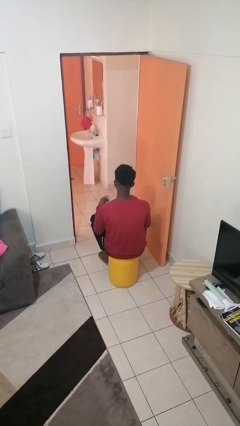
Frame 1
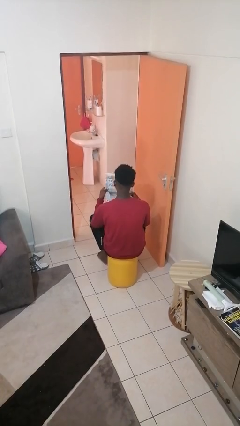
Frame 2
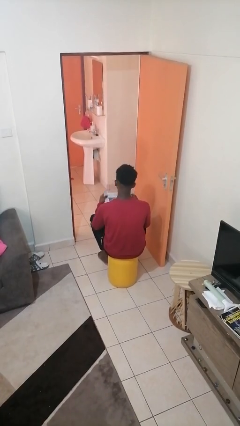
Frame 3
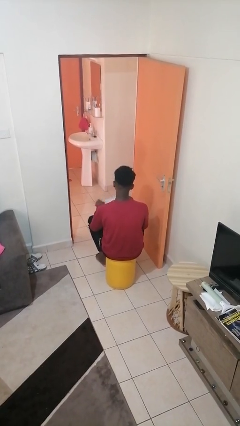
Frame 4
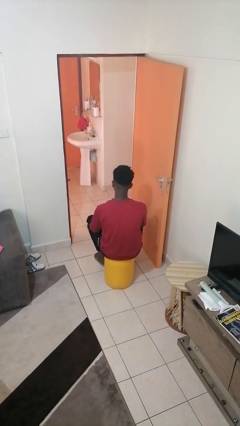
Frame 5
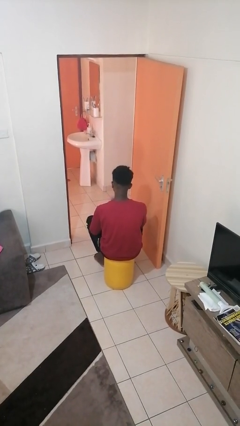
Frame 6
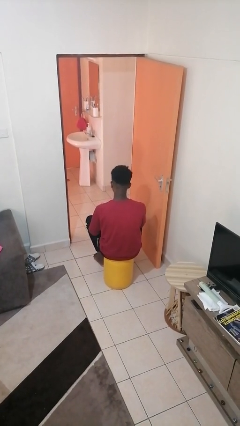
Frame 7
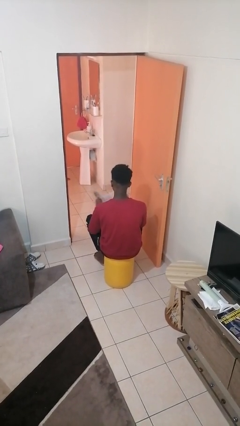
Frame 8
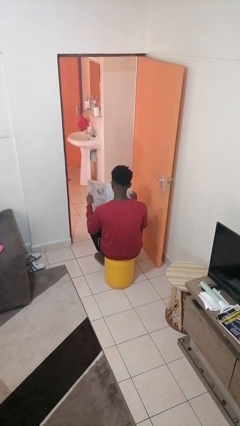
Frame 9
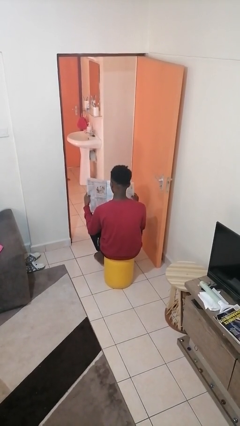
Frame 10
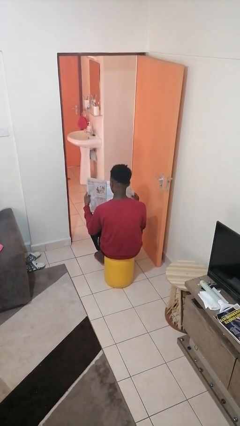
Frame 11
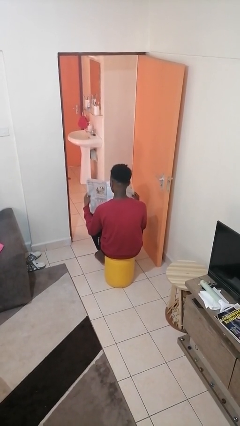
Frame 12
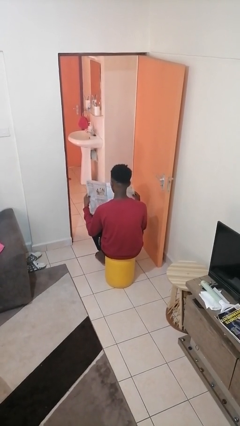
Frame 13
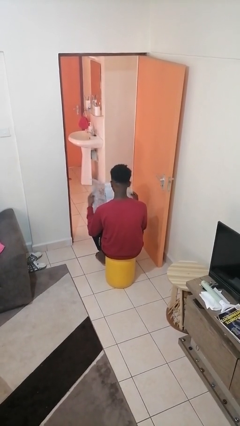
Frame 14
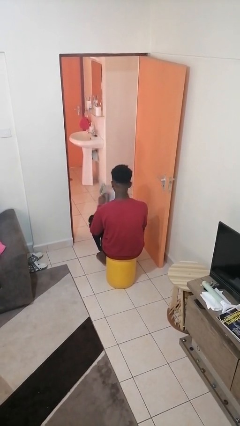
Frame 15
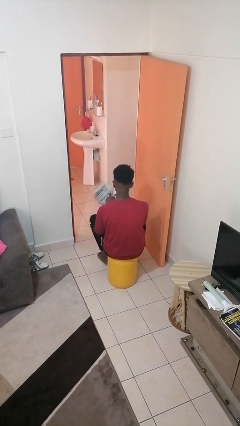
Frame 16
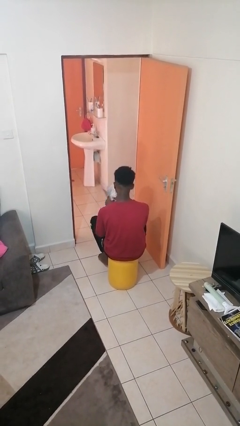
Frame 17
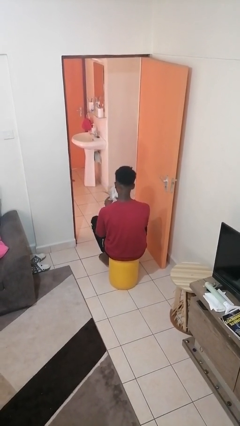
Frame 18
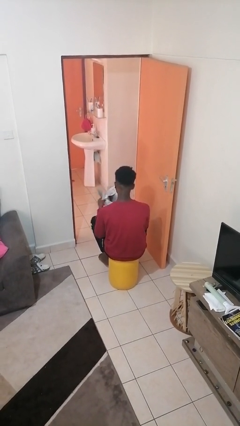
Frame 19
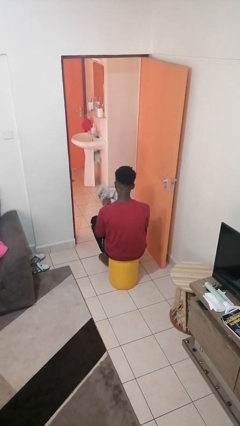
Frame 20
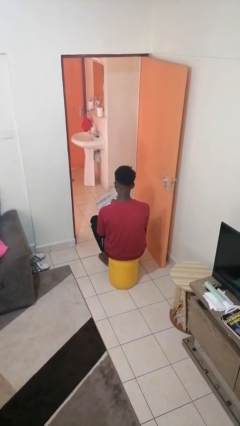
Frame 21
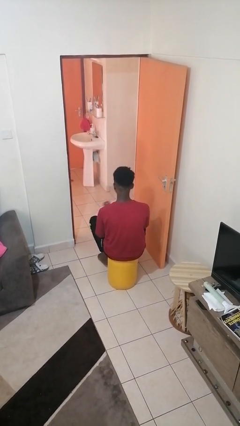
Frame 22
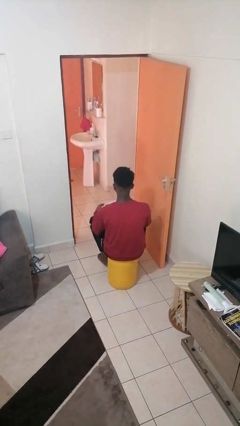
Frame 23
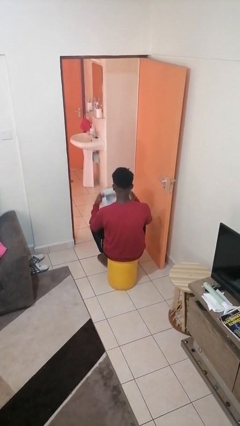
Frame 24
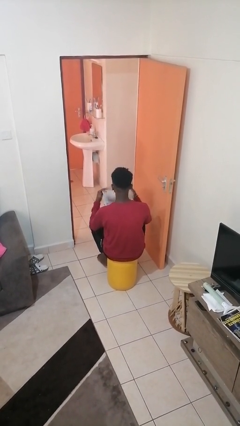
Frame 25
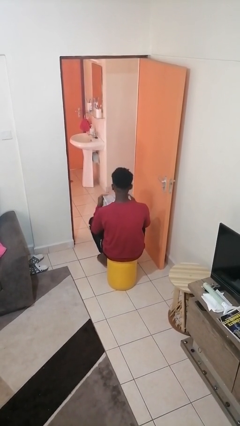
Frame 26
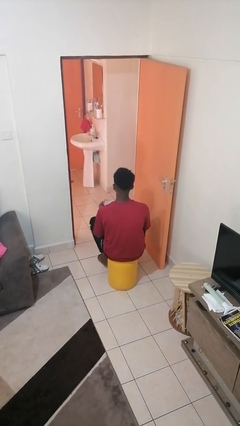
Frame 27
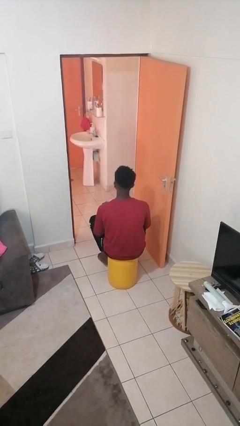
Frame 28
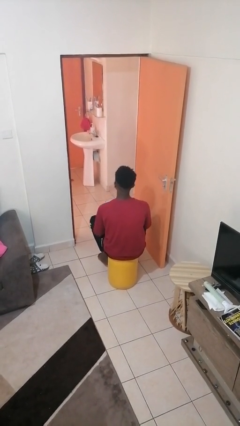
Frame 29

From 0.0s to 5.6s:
person reads newspaper

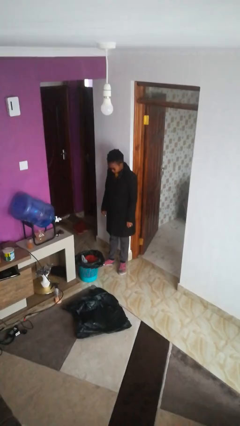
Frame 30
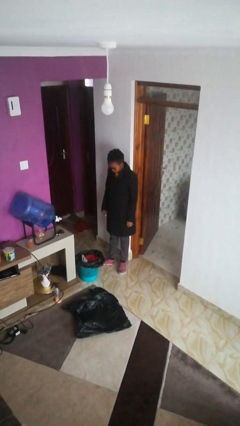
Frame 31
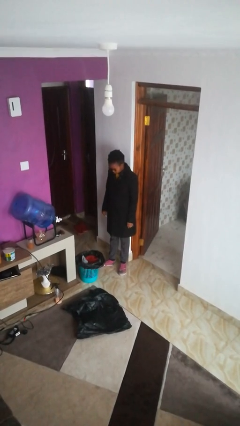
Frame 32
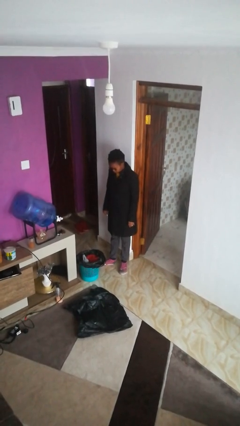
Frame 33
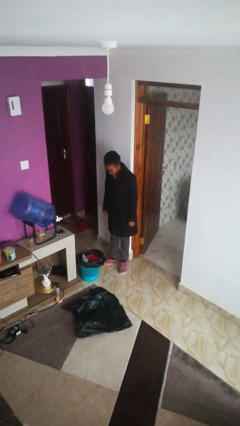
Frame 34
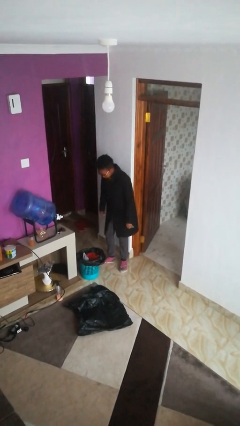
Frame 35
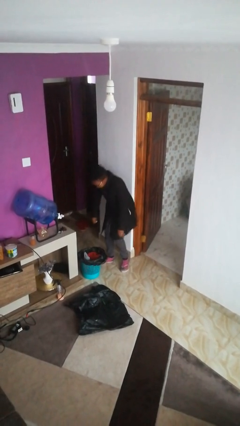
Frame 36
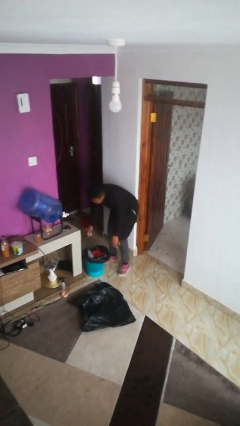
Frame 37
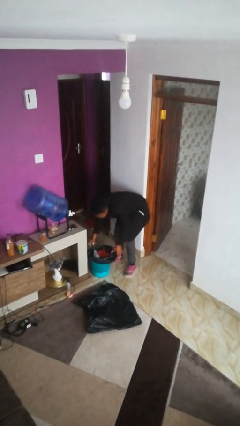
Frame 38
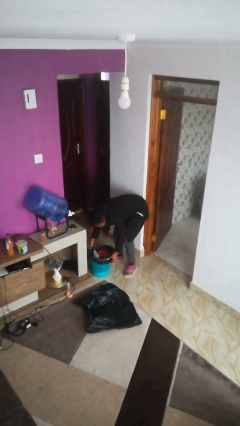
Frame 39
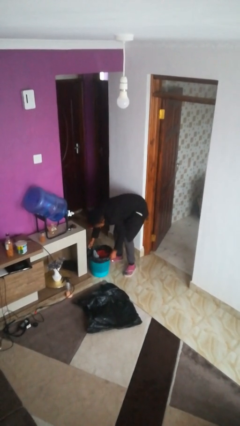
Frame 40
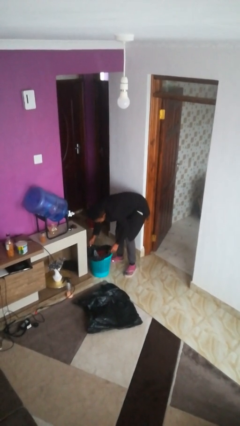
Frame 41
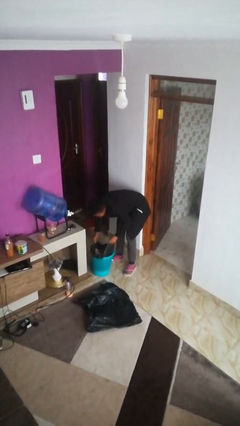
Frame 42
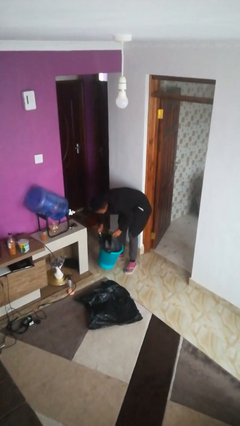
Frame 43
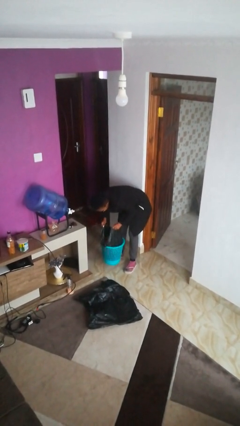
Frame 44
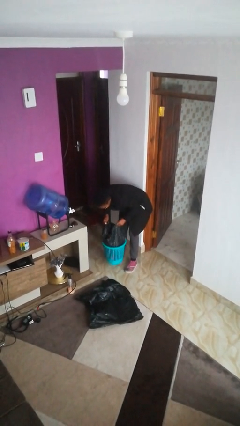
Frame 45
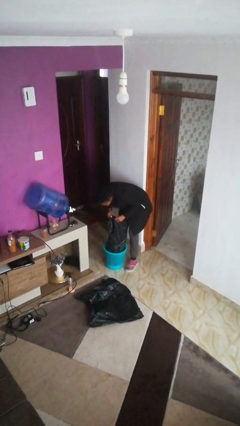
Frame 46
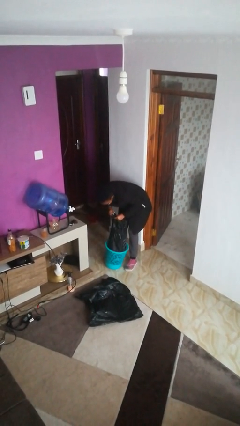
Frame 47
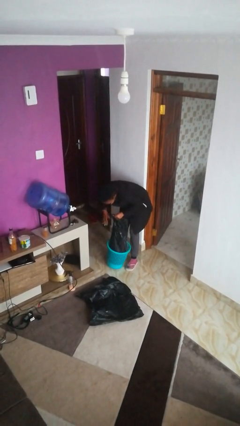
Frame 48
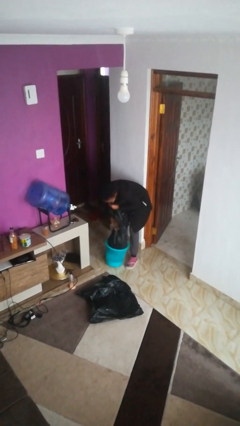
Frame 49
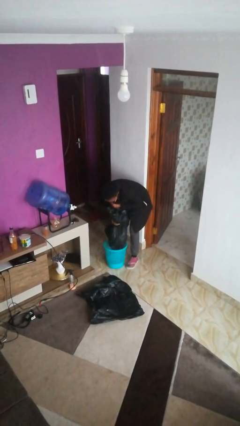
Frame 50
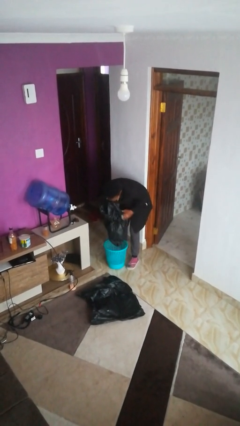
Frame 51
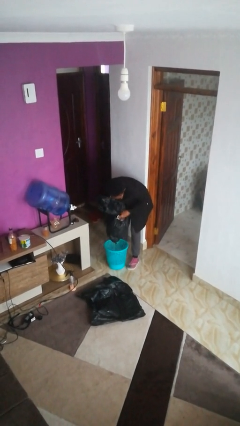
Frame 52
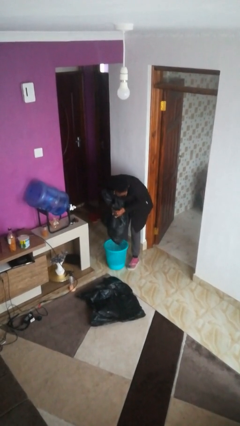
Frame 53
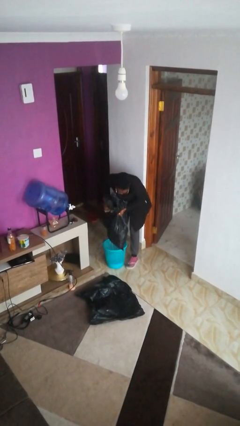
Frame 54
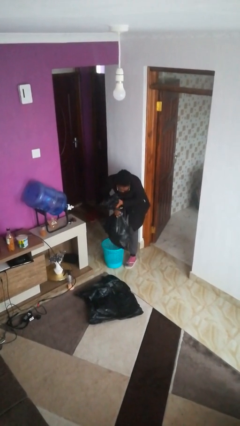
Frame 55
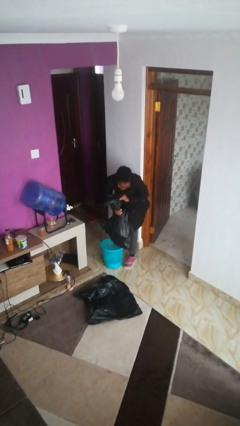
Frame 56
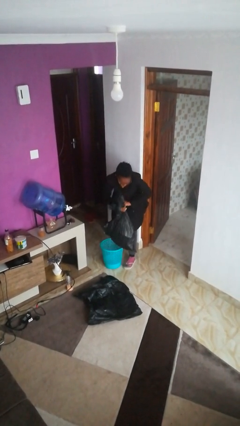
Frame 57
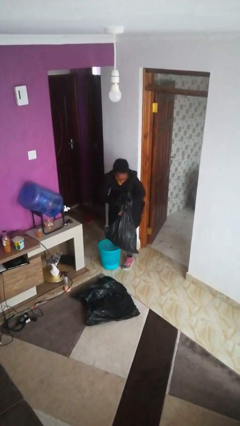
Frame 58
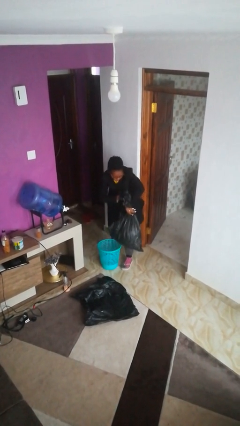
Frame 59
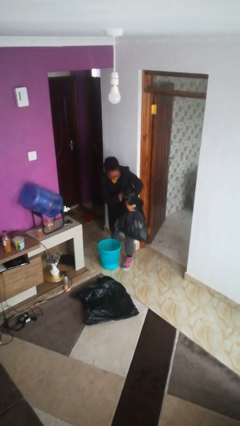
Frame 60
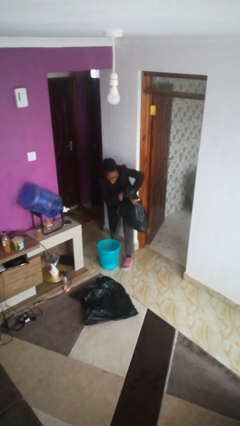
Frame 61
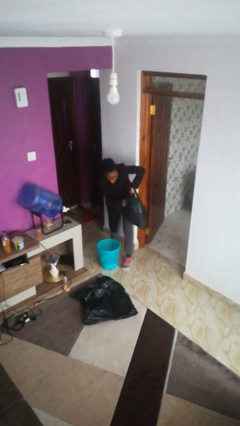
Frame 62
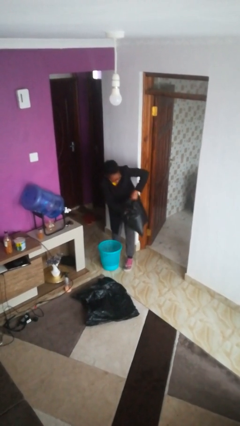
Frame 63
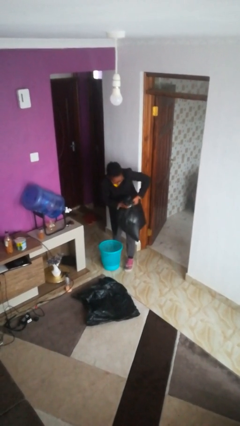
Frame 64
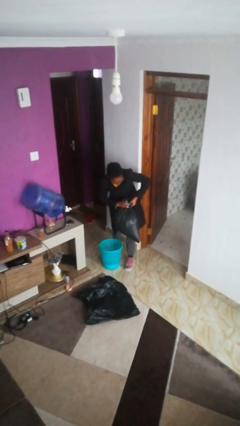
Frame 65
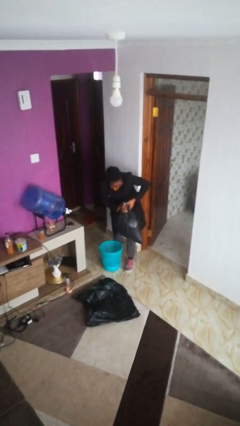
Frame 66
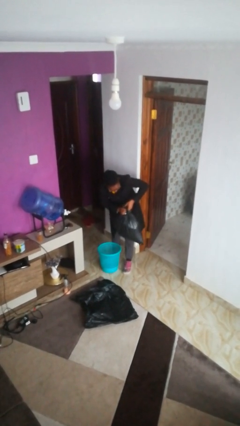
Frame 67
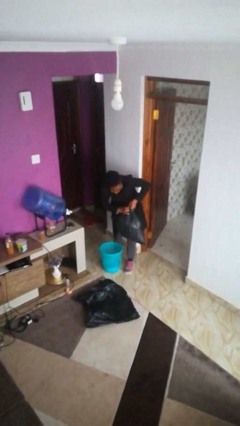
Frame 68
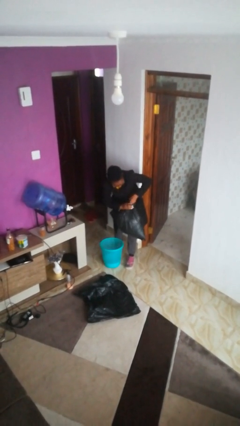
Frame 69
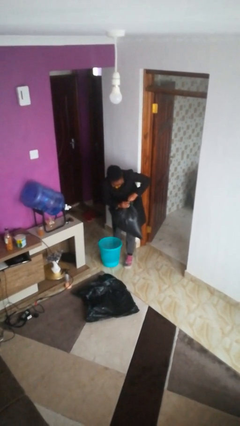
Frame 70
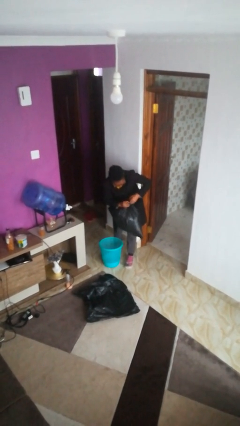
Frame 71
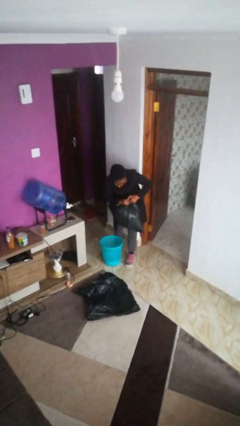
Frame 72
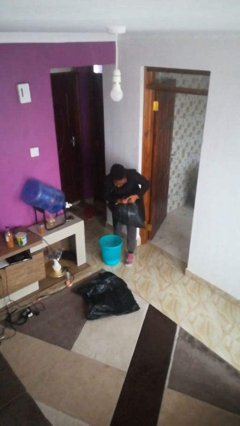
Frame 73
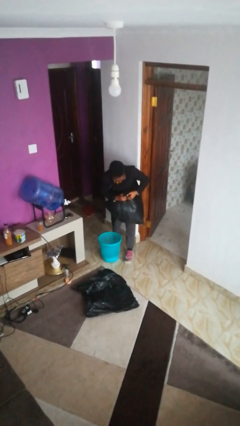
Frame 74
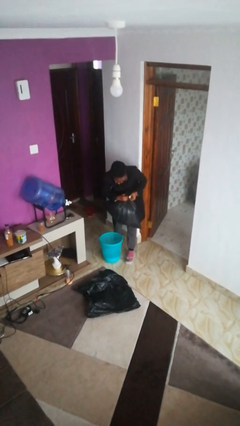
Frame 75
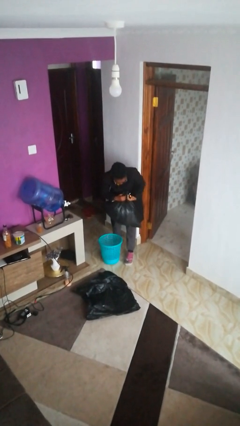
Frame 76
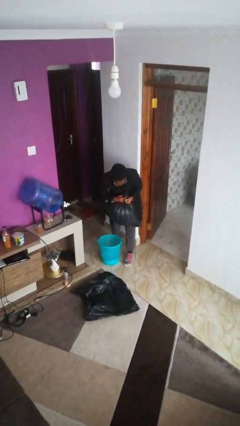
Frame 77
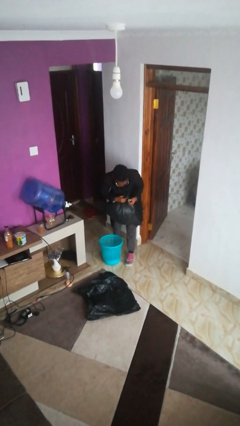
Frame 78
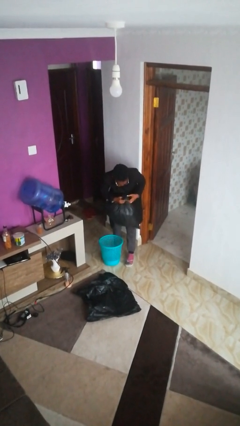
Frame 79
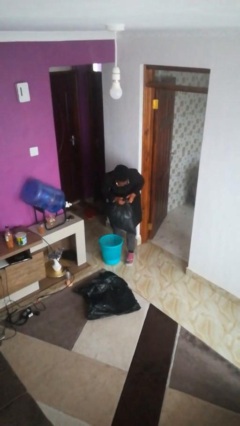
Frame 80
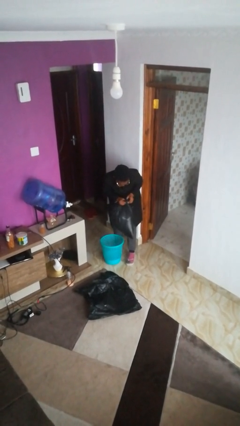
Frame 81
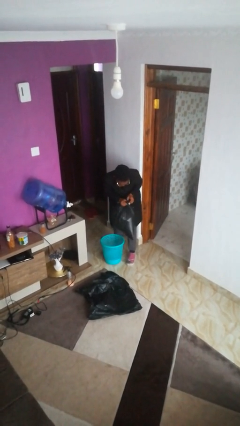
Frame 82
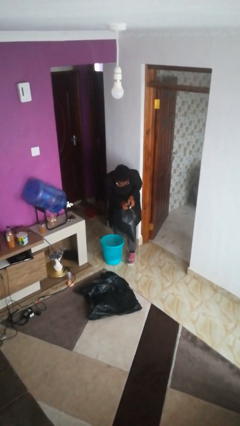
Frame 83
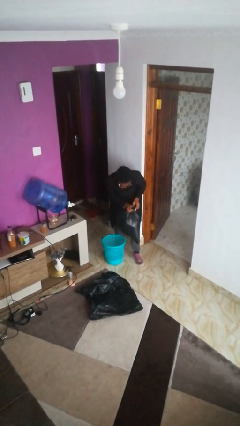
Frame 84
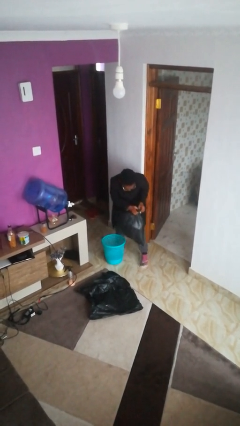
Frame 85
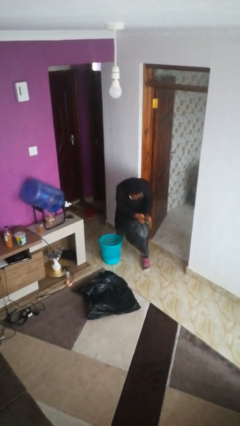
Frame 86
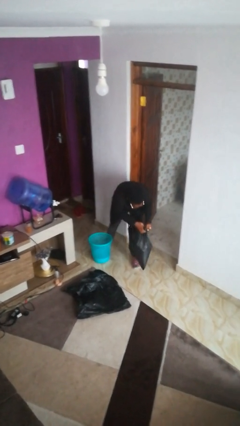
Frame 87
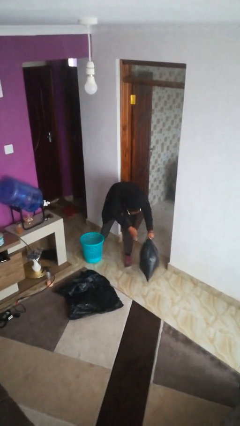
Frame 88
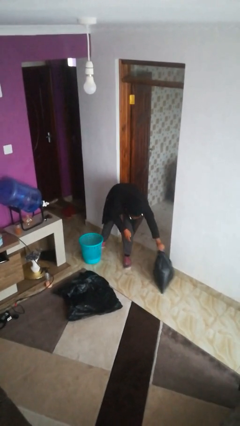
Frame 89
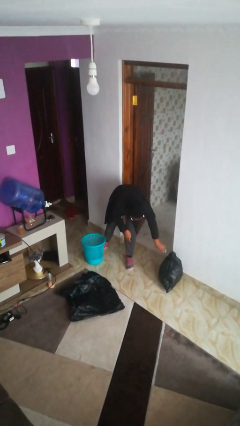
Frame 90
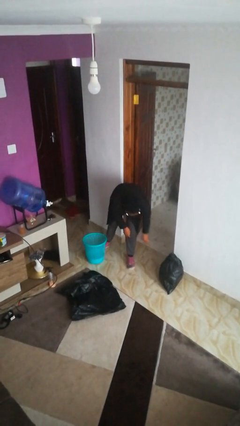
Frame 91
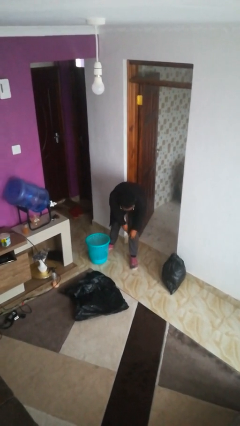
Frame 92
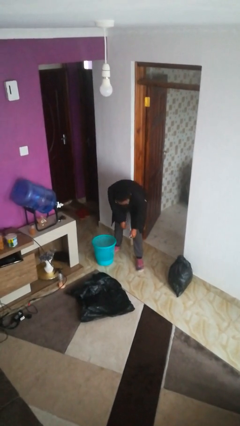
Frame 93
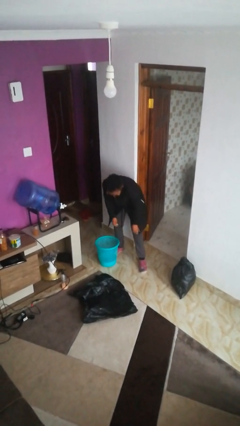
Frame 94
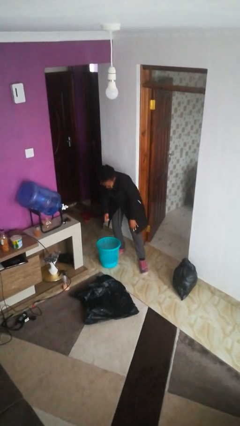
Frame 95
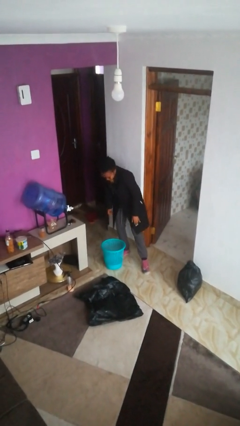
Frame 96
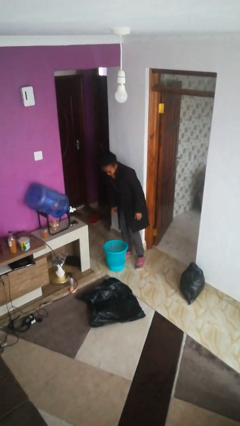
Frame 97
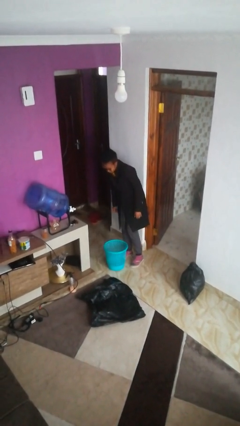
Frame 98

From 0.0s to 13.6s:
person removes trashbag from trashcan
